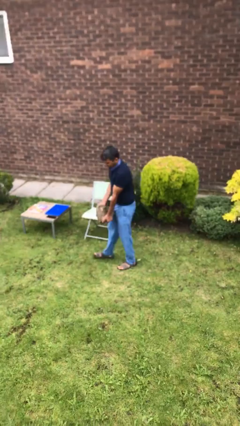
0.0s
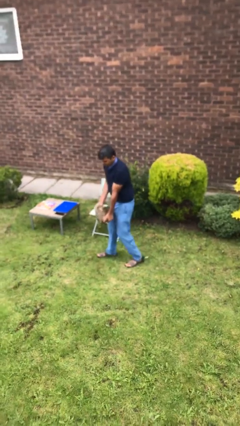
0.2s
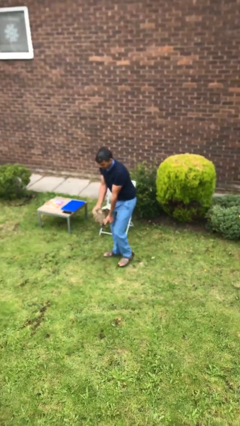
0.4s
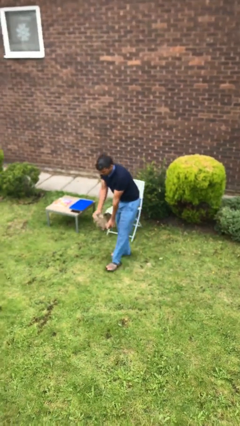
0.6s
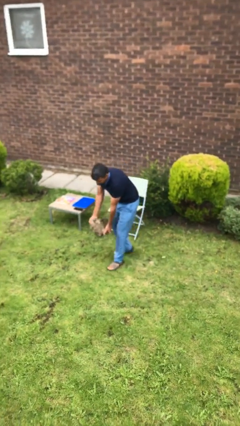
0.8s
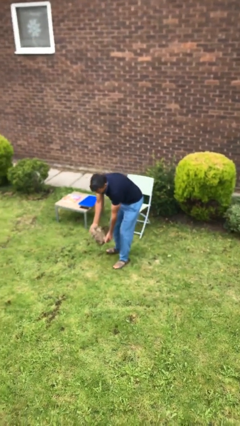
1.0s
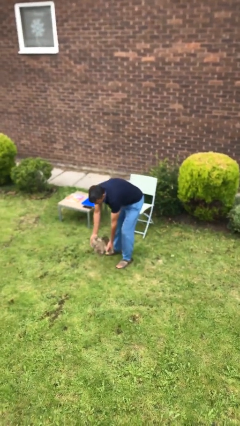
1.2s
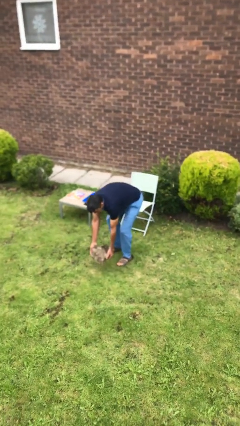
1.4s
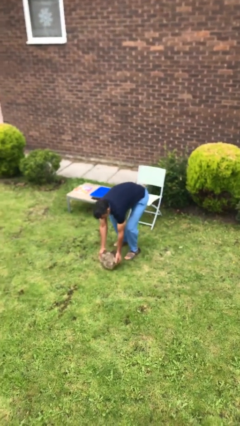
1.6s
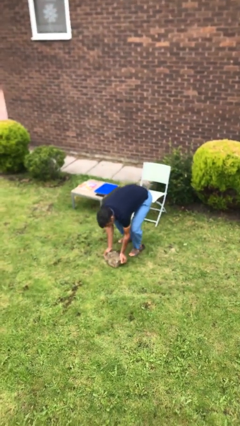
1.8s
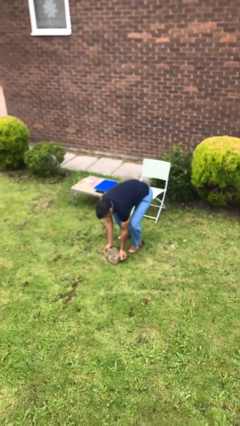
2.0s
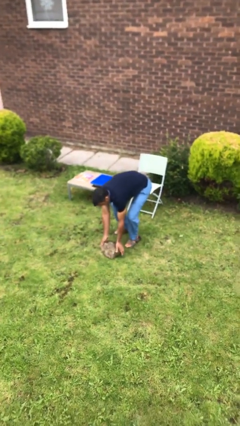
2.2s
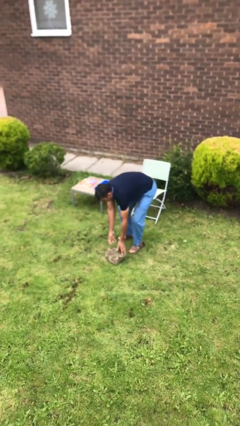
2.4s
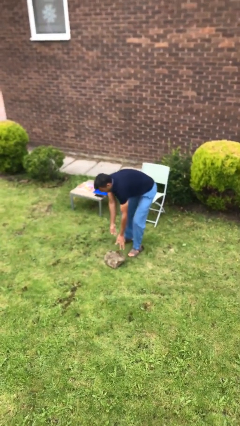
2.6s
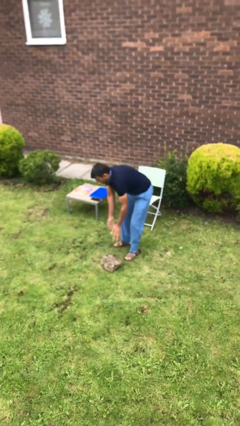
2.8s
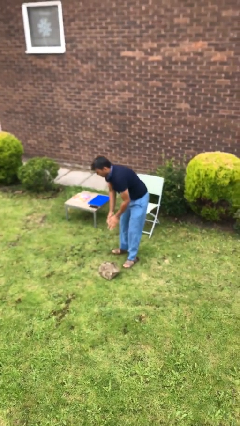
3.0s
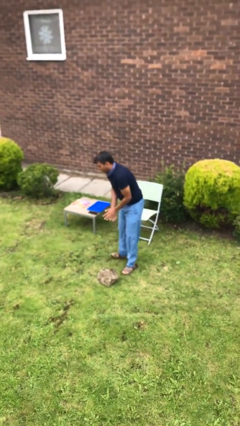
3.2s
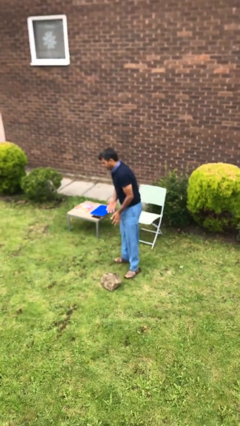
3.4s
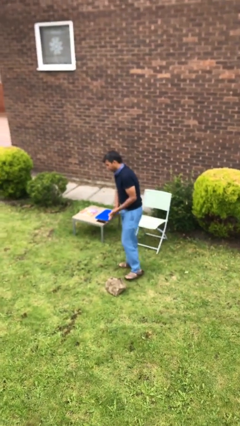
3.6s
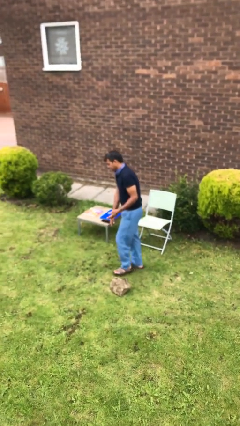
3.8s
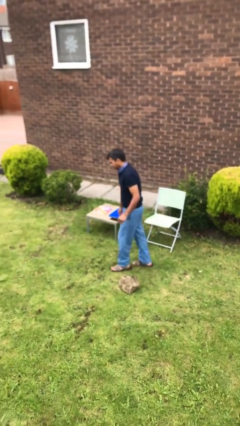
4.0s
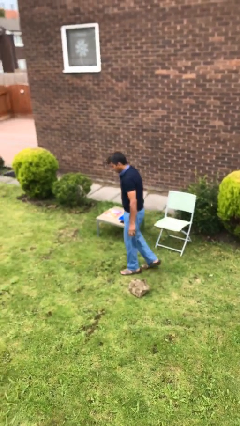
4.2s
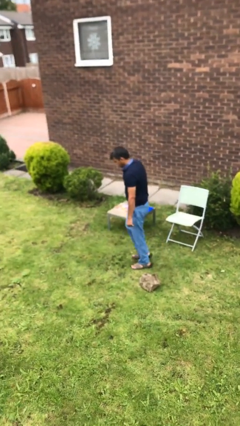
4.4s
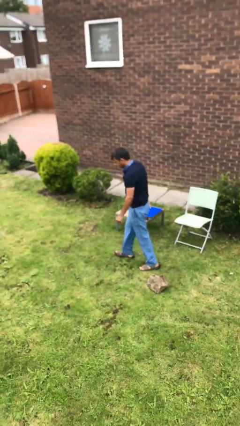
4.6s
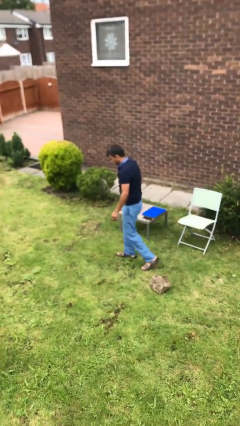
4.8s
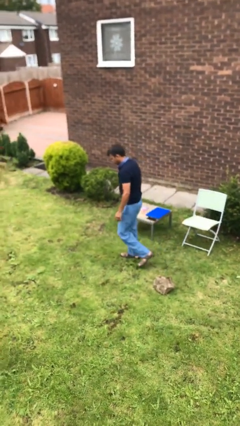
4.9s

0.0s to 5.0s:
person puts down object on floor

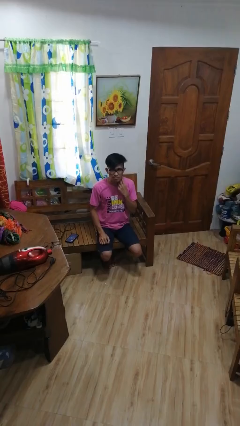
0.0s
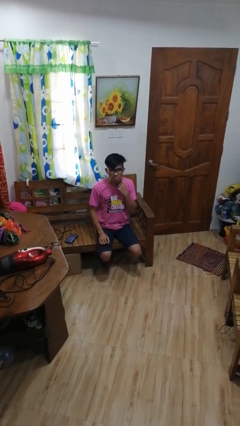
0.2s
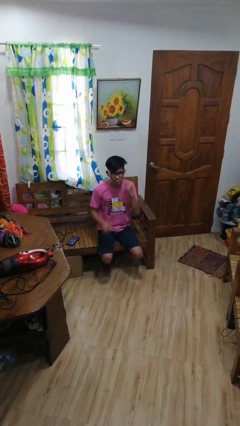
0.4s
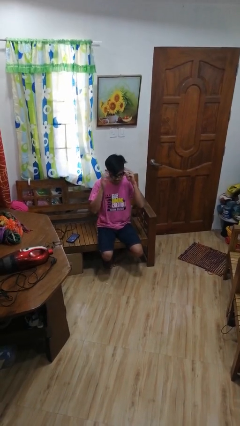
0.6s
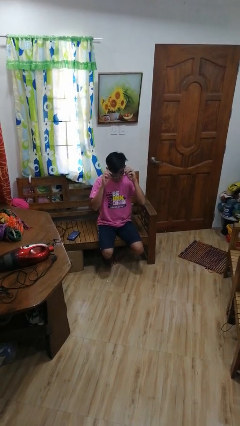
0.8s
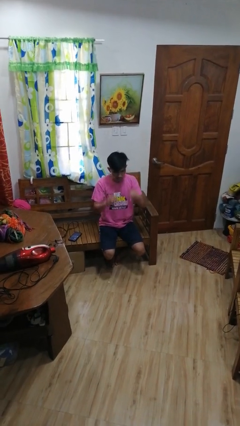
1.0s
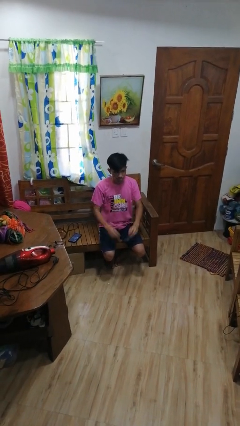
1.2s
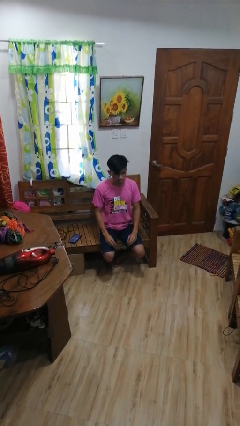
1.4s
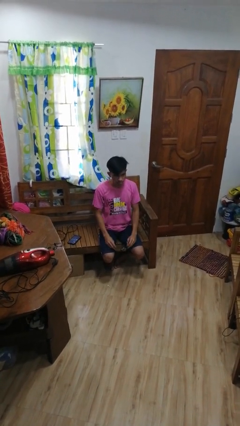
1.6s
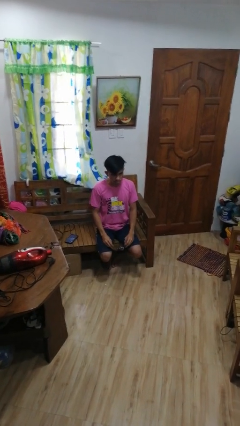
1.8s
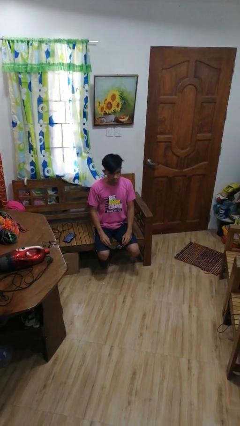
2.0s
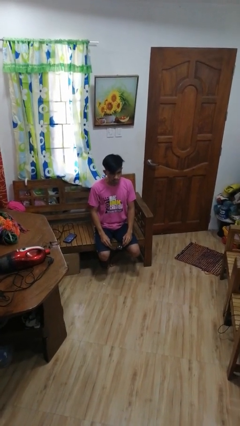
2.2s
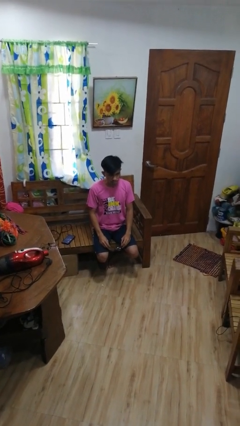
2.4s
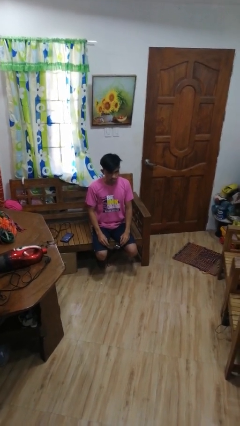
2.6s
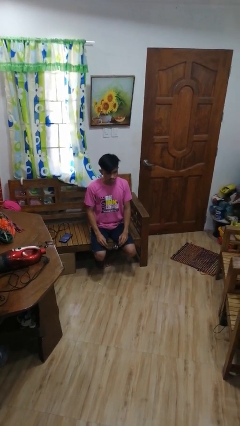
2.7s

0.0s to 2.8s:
person takes off glasses

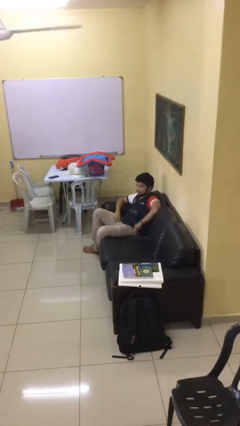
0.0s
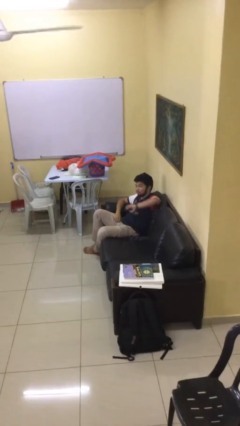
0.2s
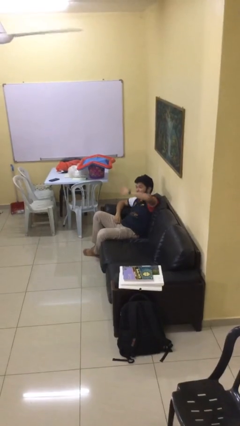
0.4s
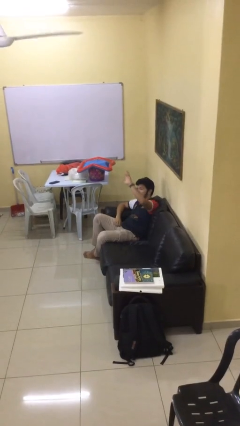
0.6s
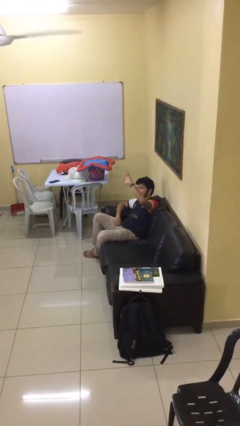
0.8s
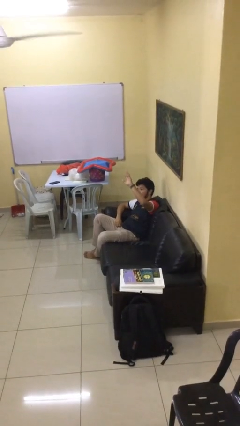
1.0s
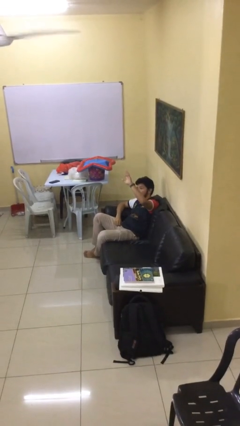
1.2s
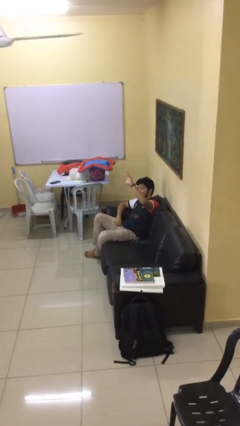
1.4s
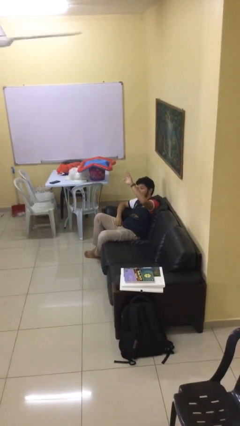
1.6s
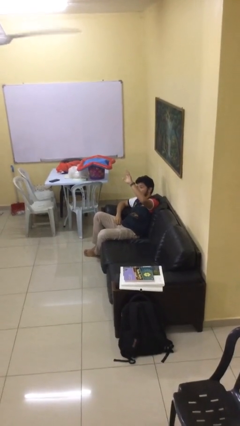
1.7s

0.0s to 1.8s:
person gestures swipe up

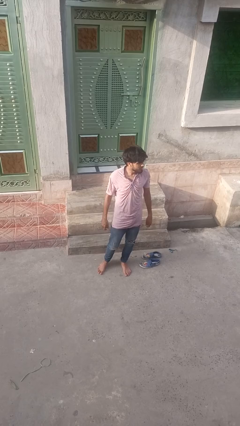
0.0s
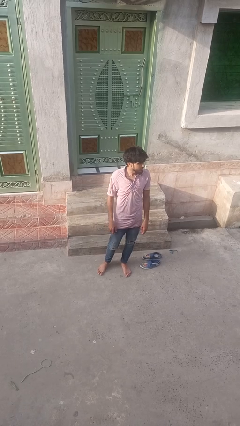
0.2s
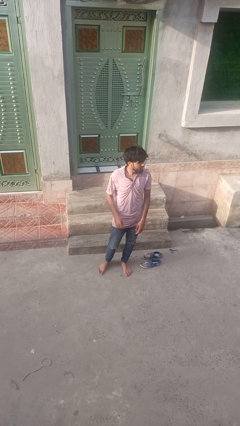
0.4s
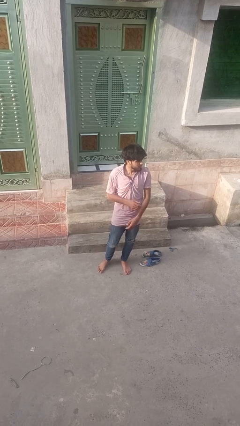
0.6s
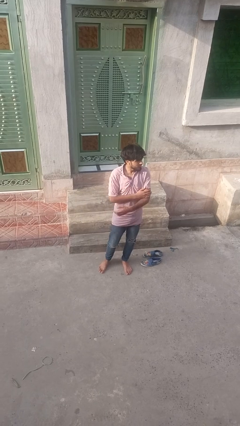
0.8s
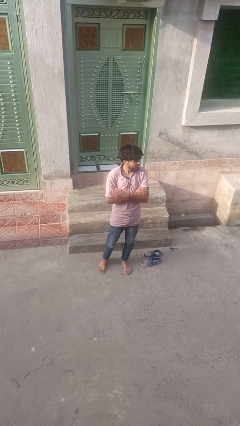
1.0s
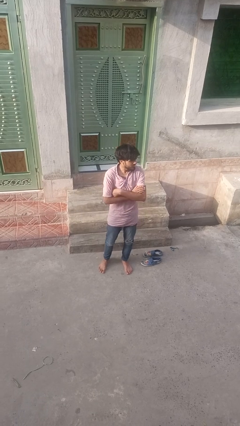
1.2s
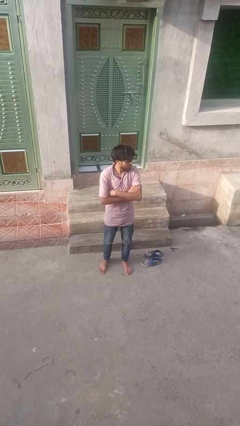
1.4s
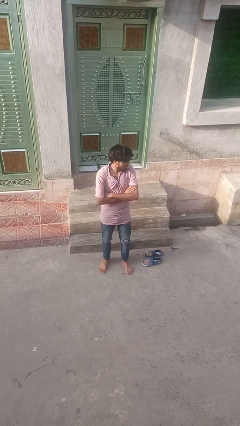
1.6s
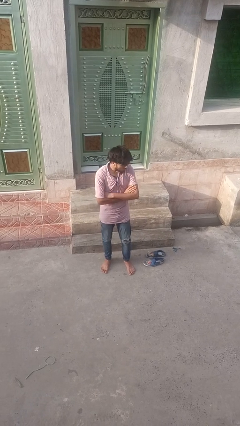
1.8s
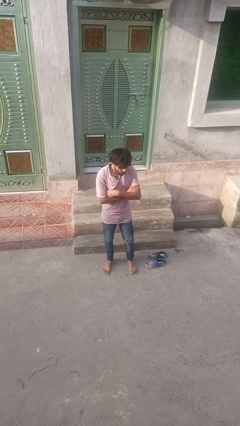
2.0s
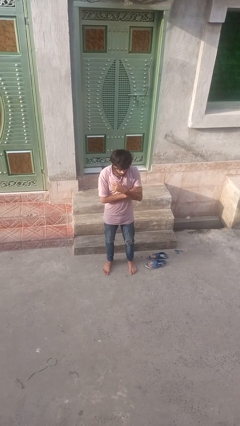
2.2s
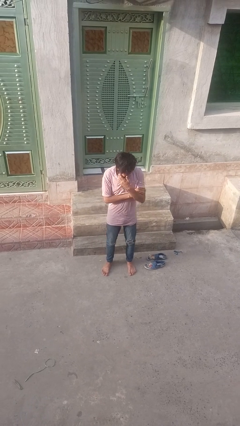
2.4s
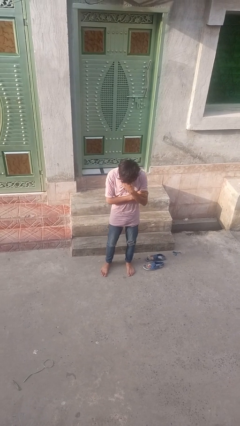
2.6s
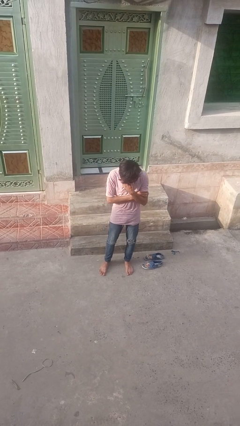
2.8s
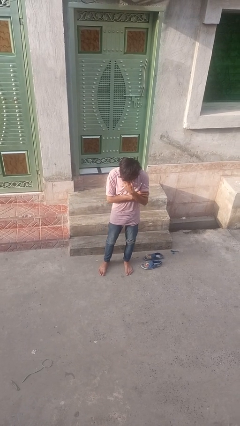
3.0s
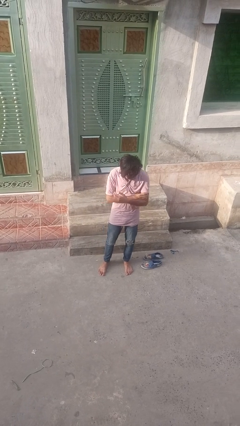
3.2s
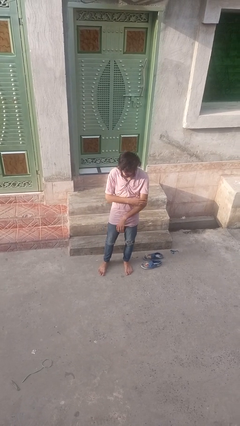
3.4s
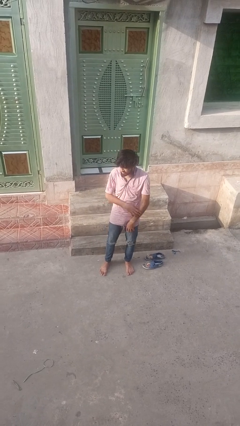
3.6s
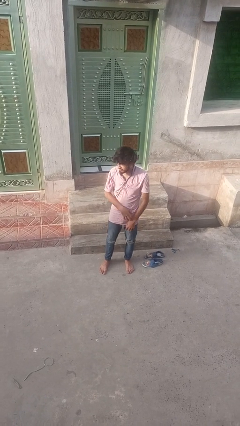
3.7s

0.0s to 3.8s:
person crosses arms

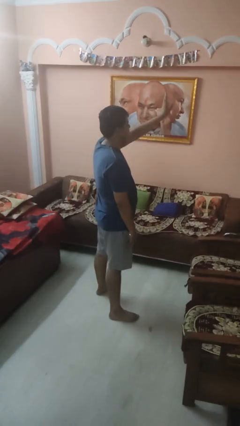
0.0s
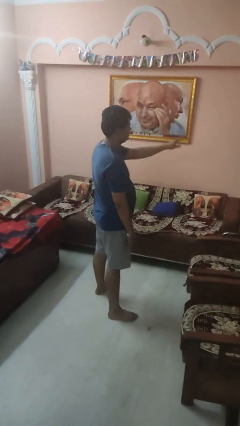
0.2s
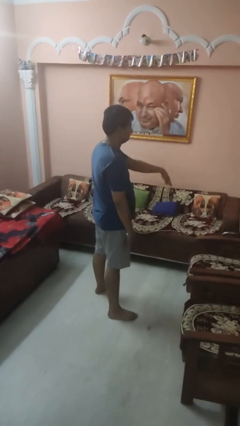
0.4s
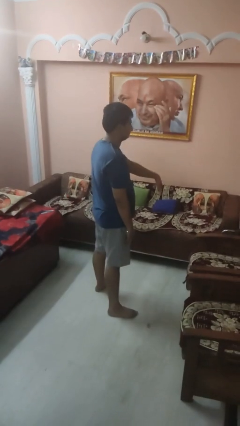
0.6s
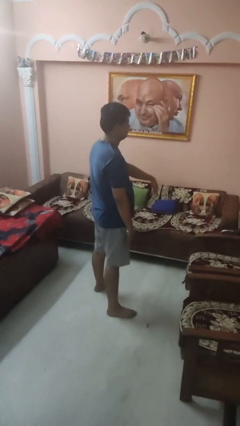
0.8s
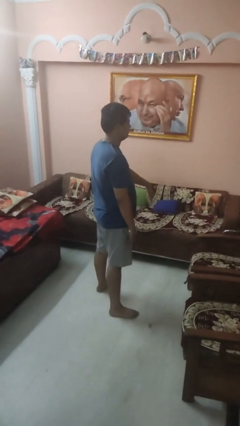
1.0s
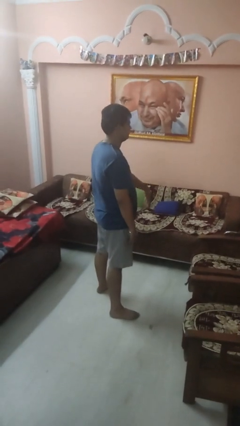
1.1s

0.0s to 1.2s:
person gestures swipe down

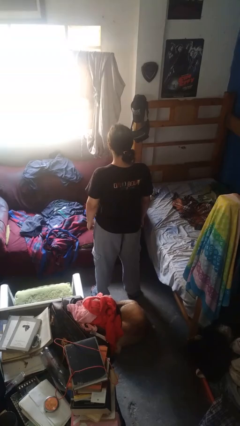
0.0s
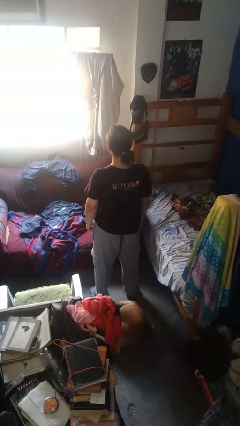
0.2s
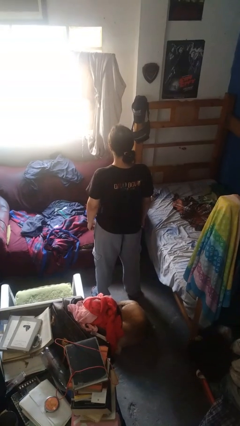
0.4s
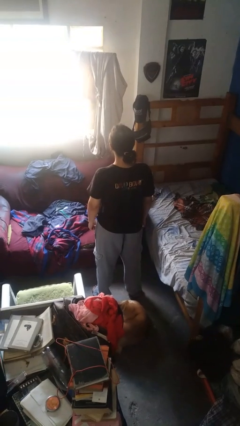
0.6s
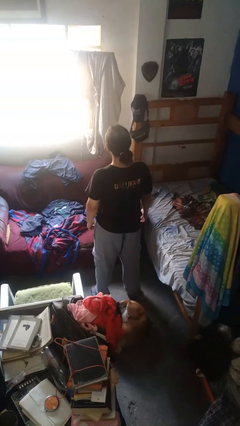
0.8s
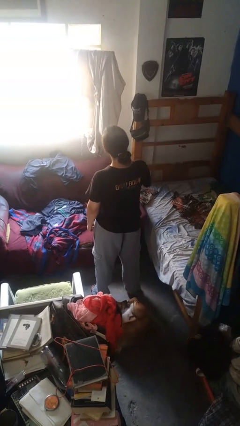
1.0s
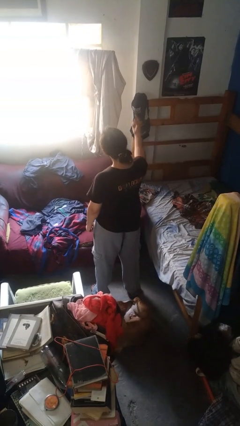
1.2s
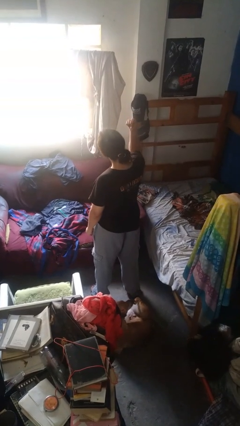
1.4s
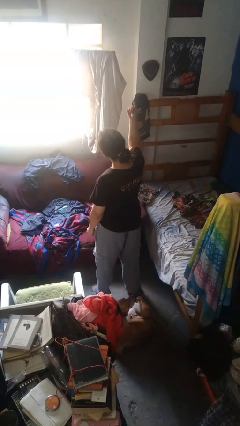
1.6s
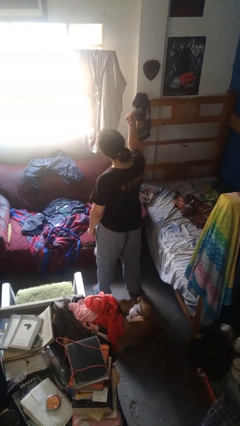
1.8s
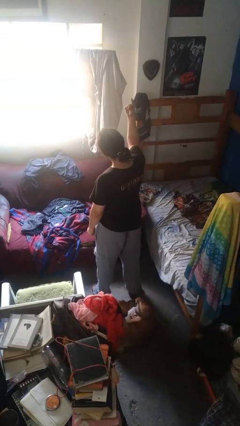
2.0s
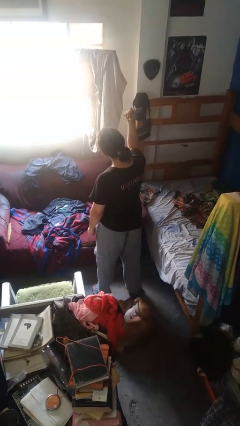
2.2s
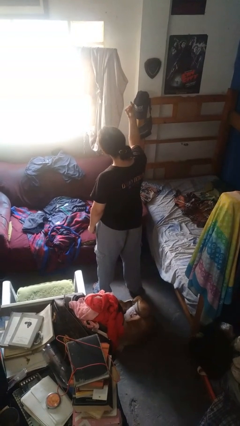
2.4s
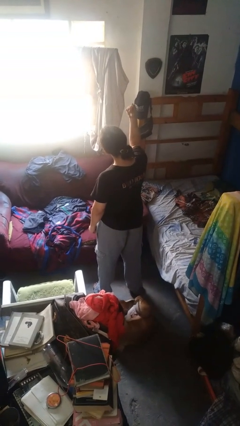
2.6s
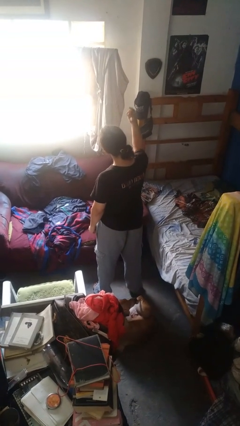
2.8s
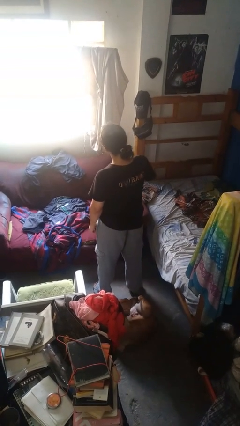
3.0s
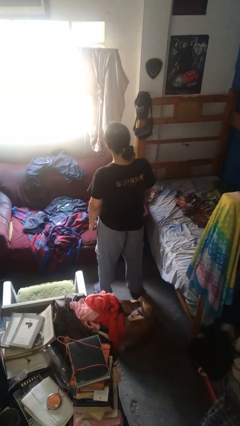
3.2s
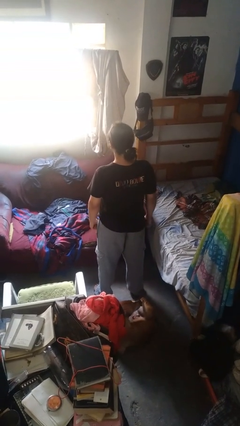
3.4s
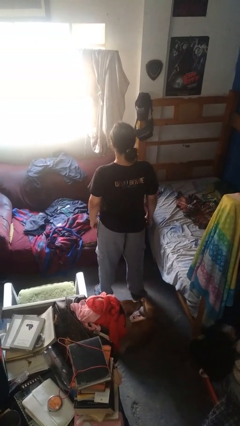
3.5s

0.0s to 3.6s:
person gestures number one
